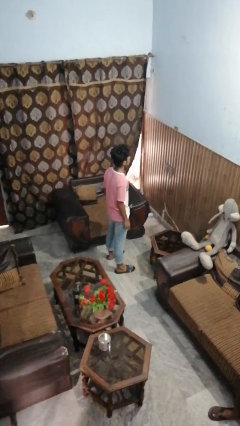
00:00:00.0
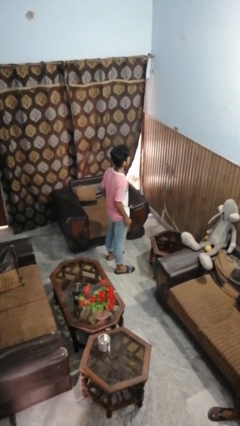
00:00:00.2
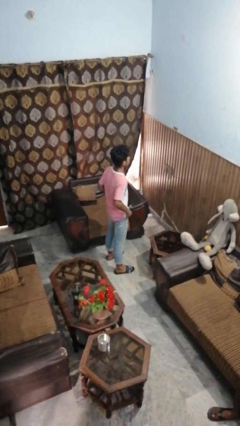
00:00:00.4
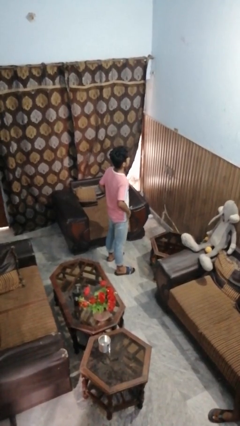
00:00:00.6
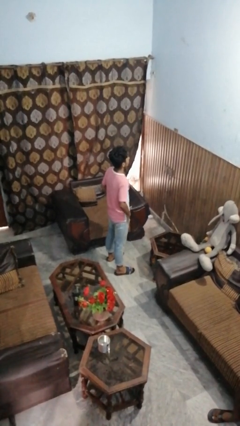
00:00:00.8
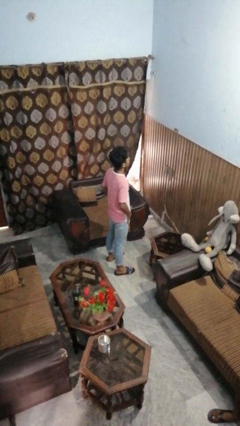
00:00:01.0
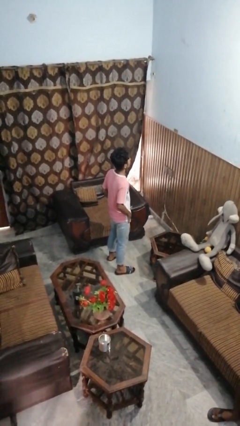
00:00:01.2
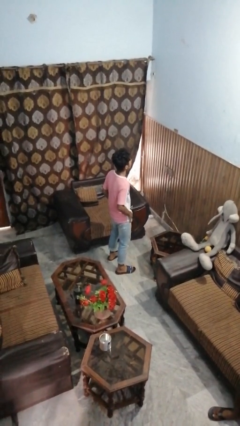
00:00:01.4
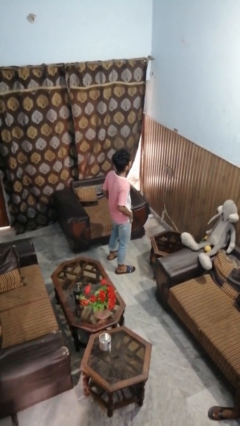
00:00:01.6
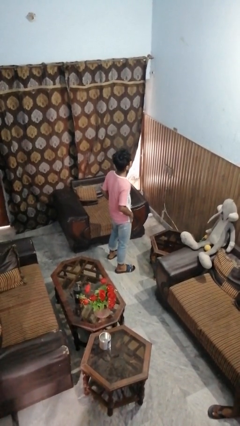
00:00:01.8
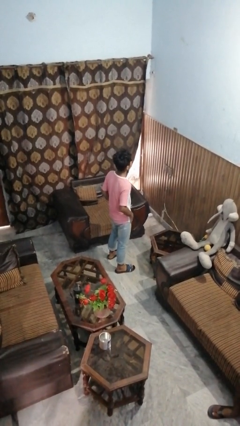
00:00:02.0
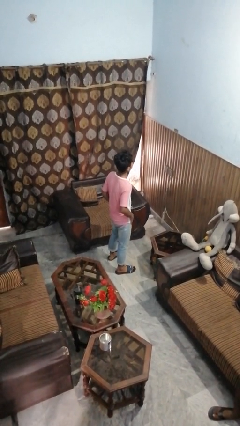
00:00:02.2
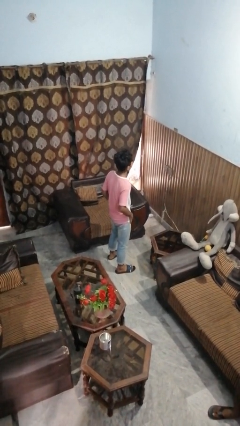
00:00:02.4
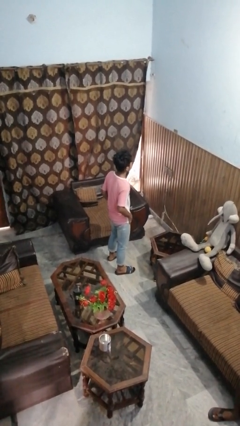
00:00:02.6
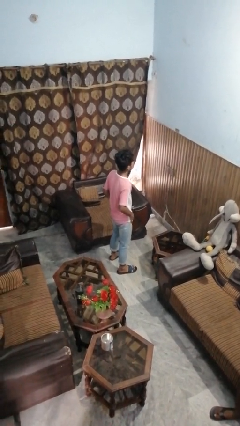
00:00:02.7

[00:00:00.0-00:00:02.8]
person puts hands in back pockets

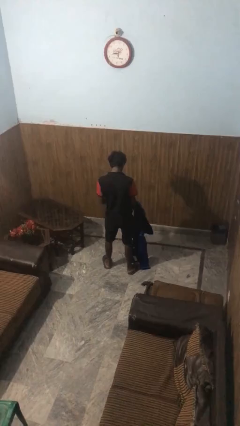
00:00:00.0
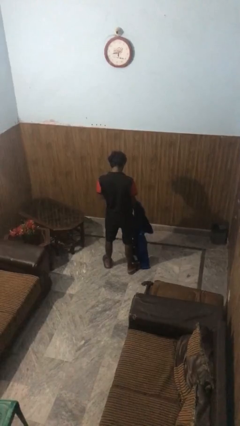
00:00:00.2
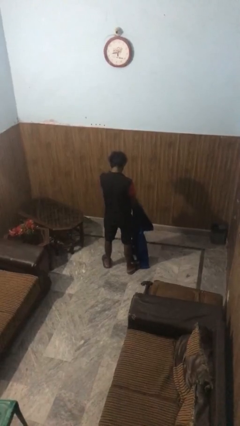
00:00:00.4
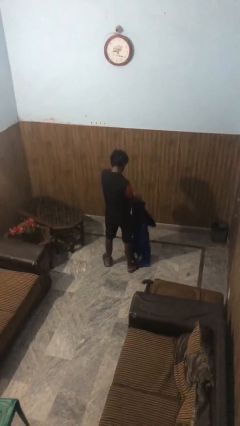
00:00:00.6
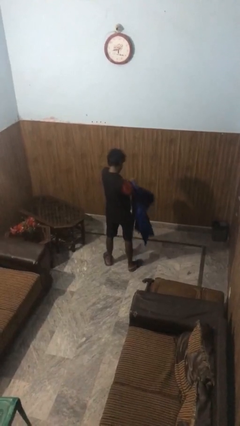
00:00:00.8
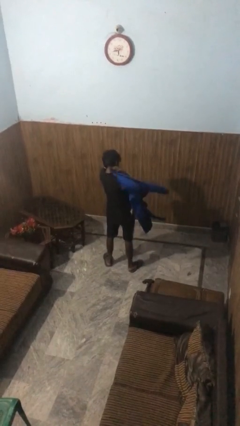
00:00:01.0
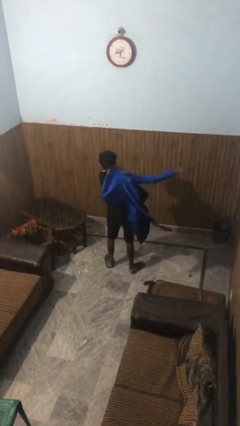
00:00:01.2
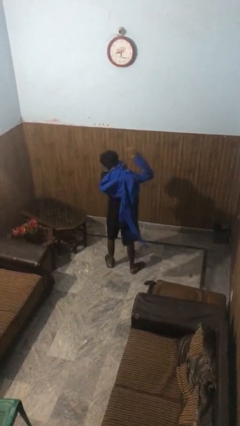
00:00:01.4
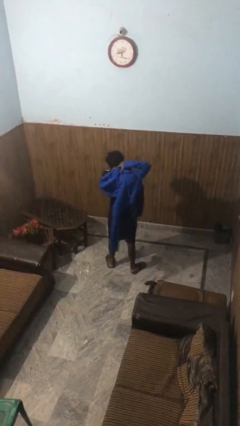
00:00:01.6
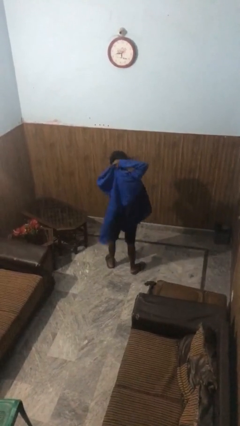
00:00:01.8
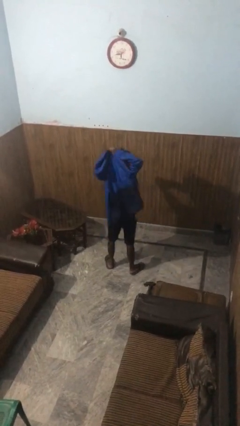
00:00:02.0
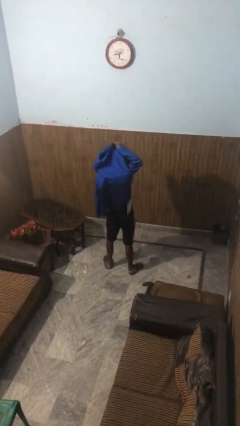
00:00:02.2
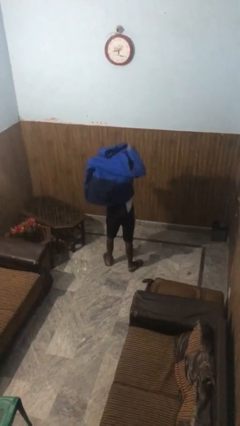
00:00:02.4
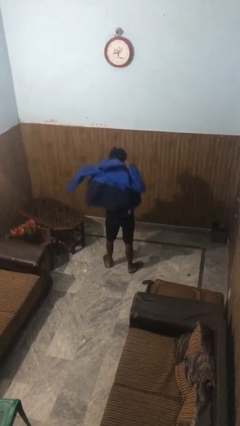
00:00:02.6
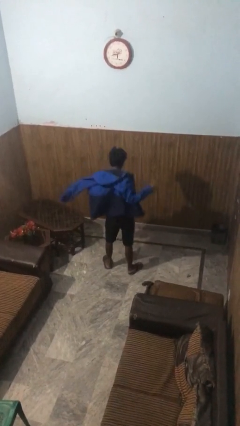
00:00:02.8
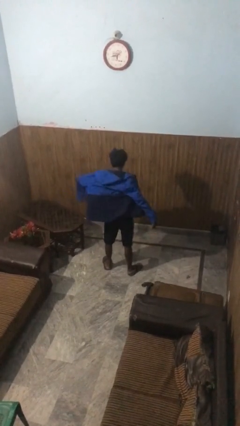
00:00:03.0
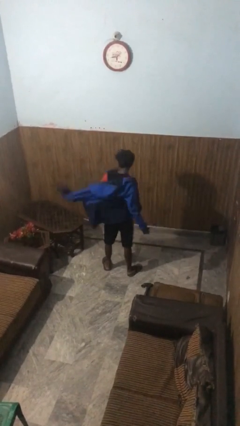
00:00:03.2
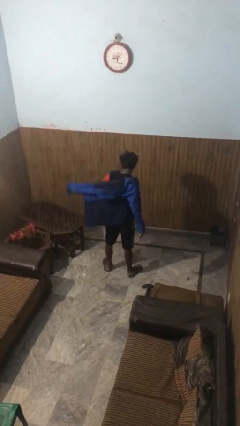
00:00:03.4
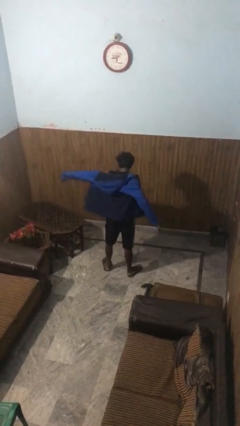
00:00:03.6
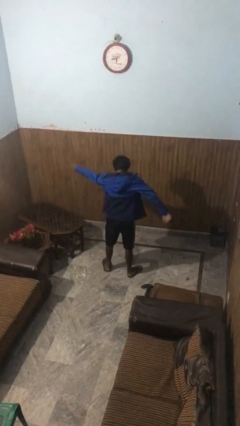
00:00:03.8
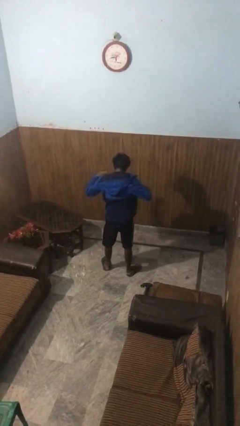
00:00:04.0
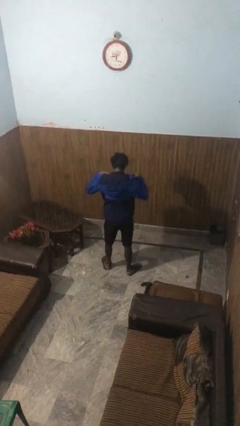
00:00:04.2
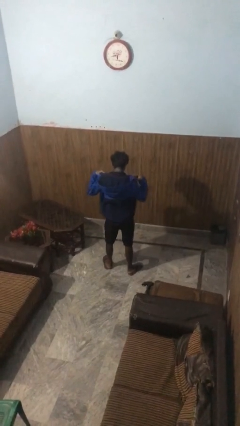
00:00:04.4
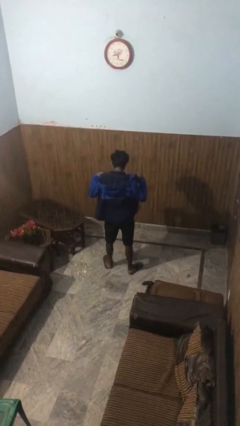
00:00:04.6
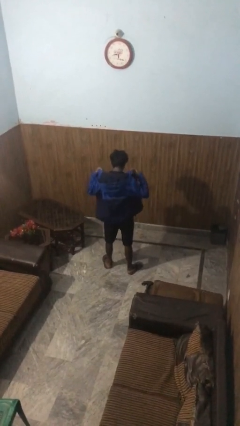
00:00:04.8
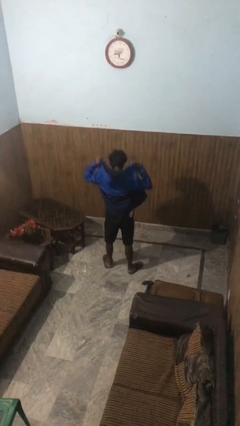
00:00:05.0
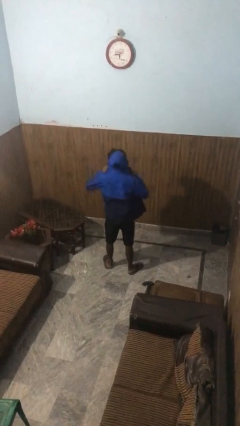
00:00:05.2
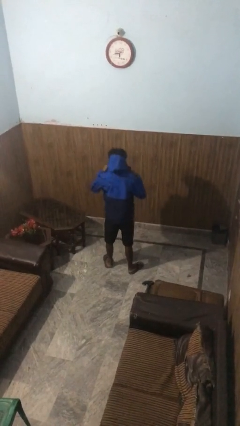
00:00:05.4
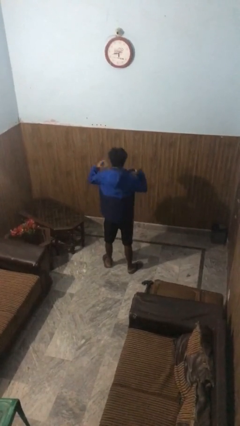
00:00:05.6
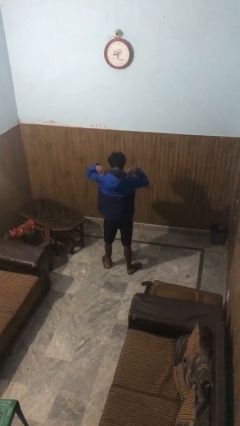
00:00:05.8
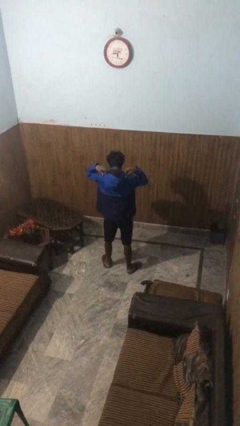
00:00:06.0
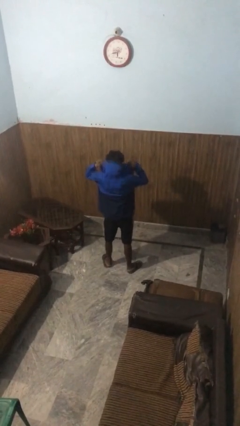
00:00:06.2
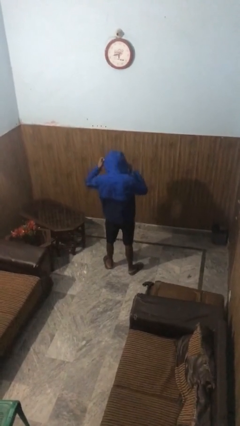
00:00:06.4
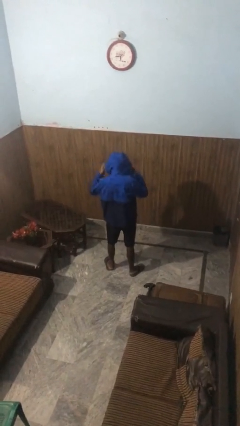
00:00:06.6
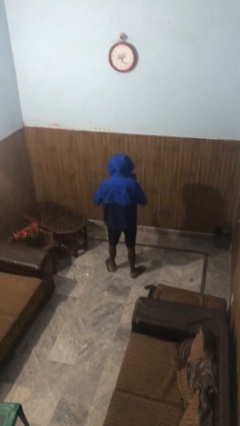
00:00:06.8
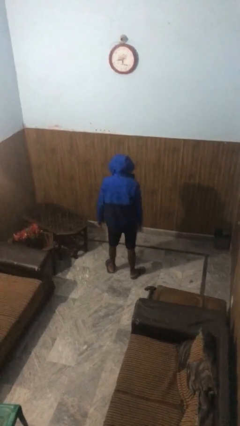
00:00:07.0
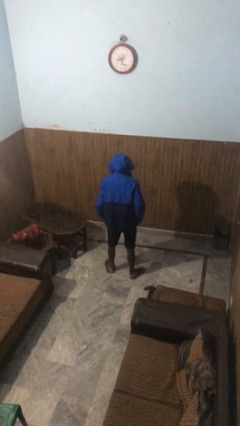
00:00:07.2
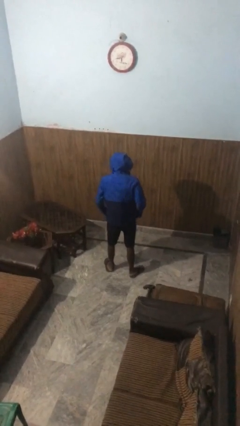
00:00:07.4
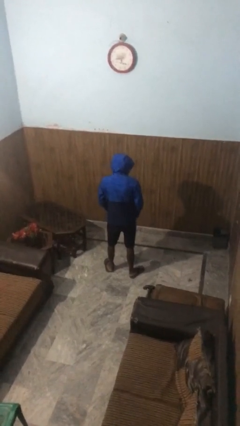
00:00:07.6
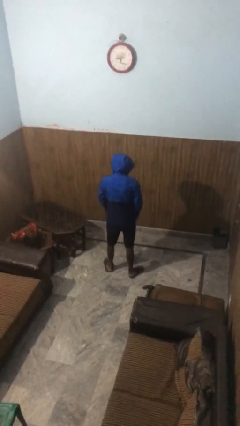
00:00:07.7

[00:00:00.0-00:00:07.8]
person puts on hoodie

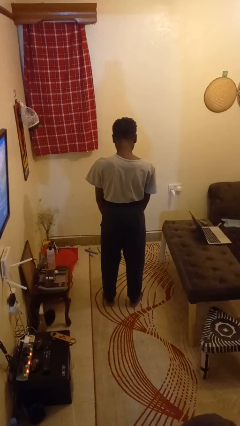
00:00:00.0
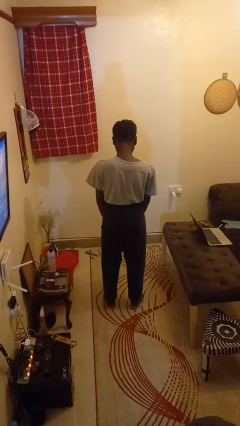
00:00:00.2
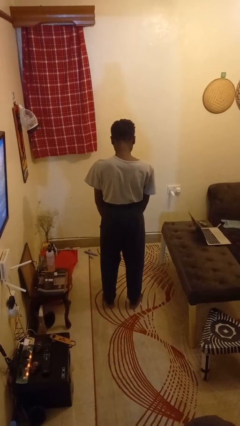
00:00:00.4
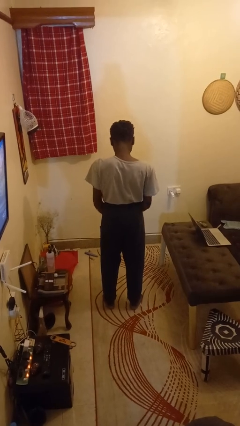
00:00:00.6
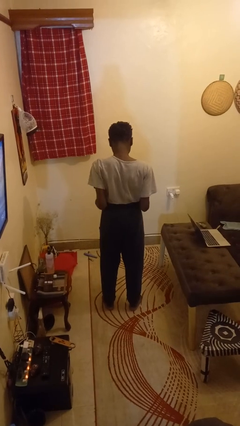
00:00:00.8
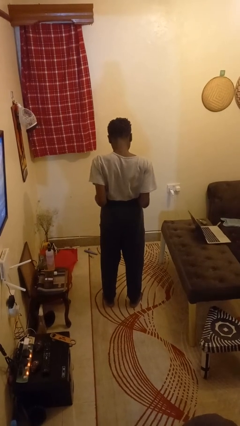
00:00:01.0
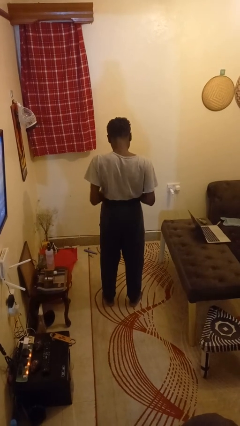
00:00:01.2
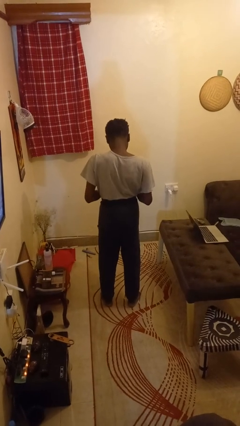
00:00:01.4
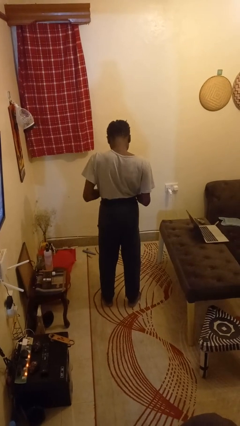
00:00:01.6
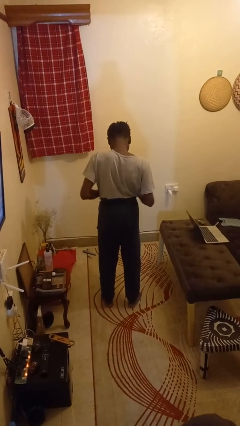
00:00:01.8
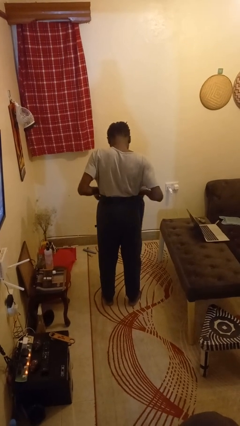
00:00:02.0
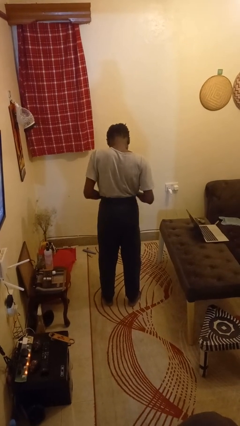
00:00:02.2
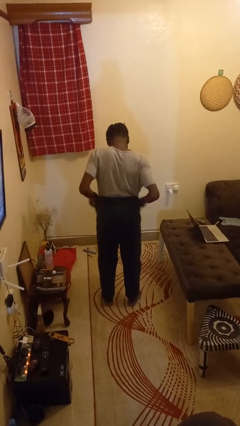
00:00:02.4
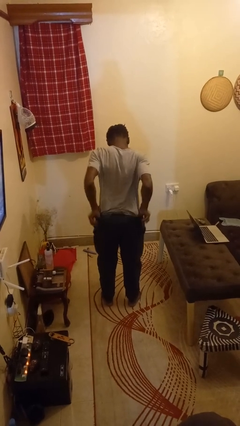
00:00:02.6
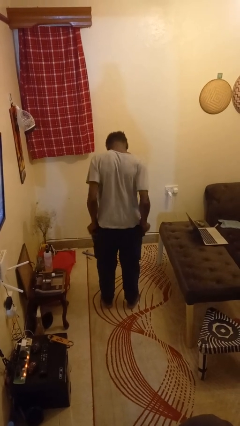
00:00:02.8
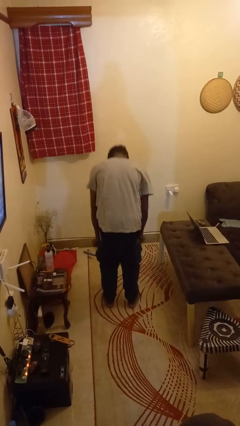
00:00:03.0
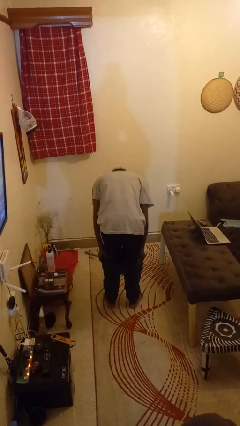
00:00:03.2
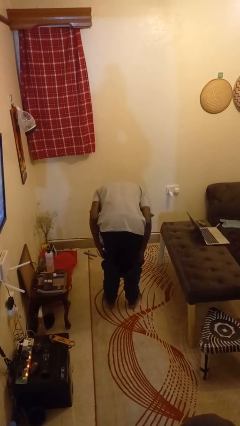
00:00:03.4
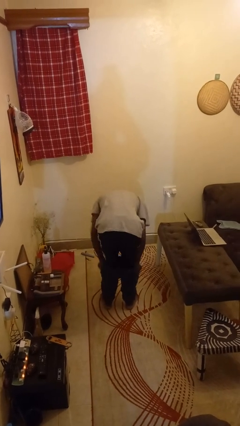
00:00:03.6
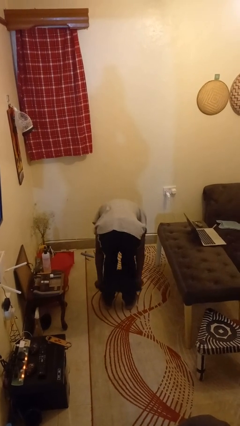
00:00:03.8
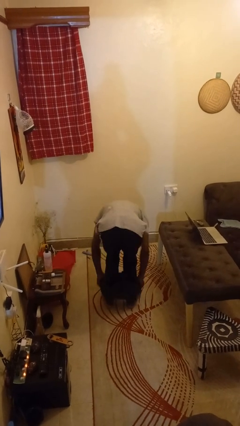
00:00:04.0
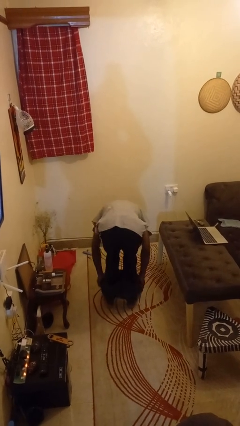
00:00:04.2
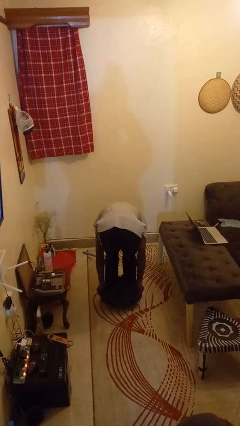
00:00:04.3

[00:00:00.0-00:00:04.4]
person takes off pants

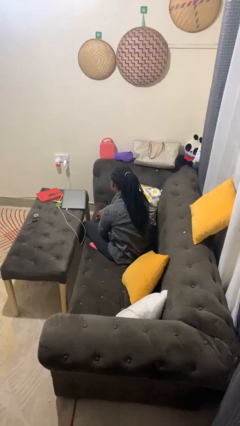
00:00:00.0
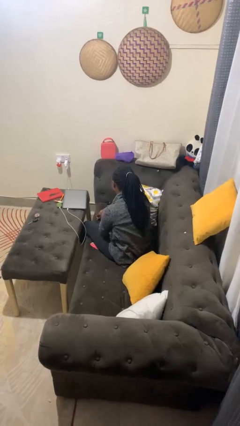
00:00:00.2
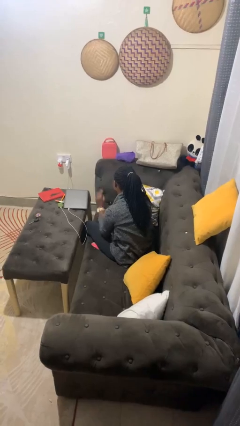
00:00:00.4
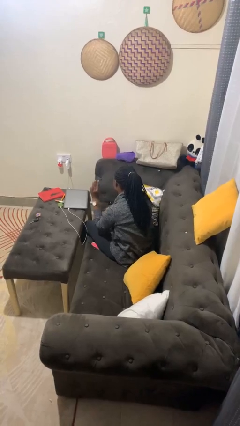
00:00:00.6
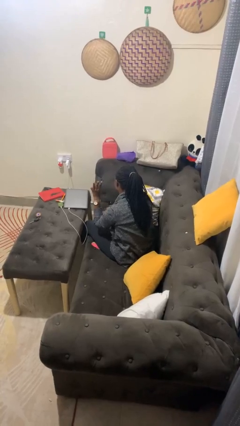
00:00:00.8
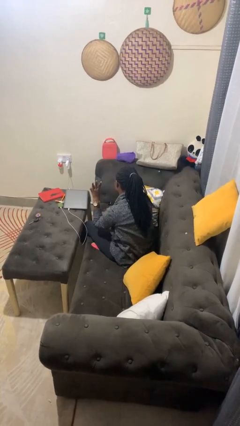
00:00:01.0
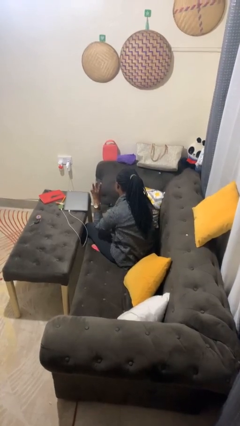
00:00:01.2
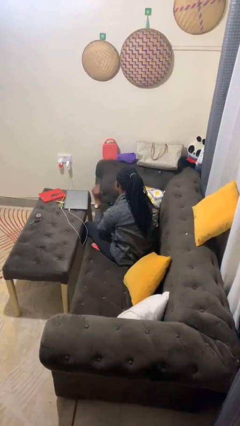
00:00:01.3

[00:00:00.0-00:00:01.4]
person gestures number three

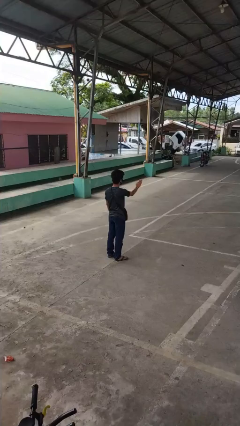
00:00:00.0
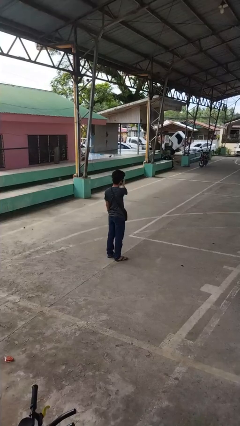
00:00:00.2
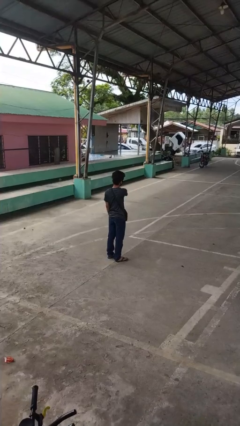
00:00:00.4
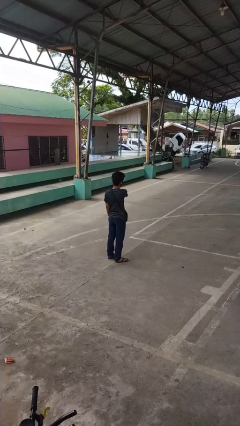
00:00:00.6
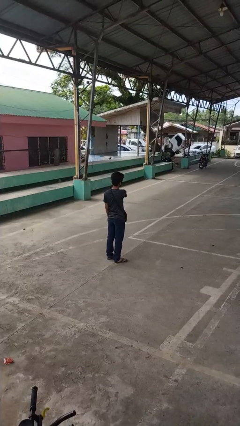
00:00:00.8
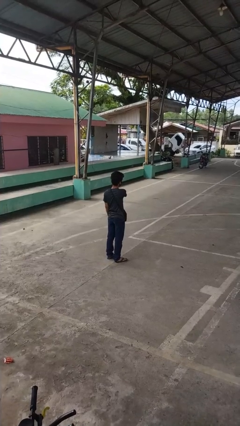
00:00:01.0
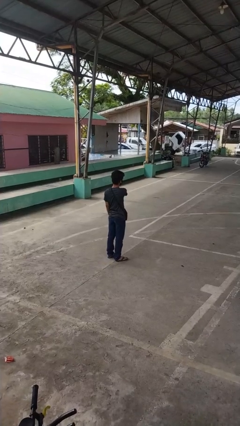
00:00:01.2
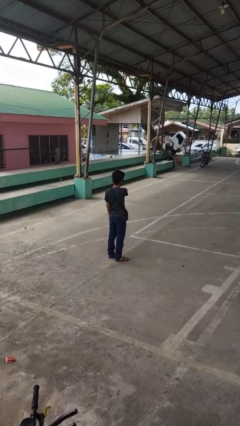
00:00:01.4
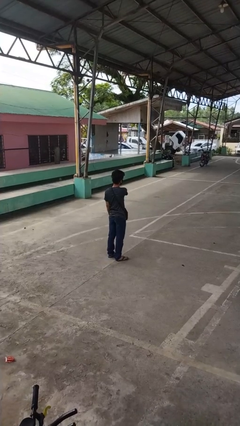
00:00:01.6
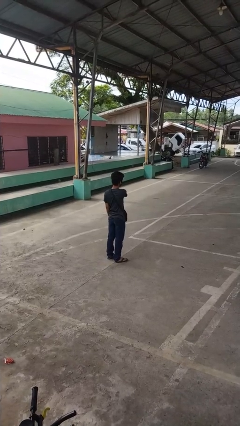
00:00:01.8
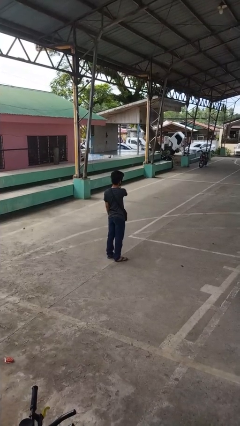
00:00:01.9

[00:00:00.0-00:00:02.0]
person gestures swipe left
